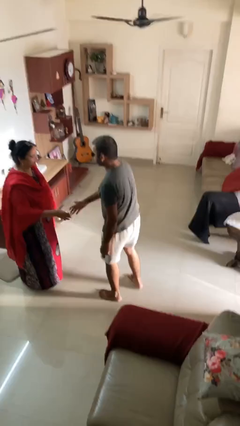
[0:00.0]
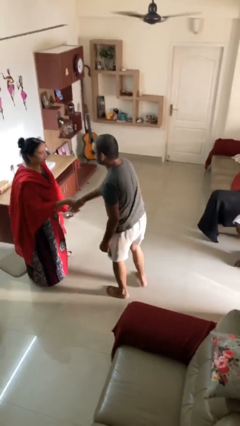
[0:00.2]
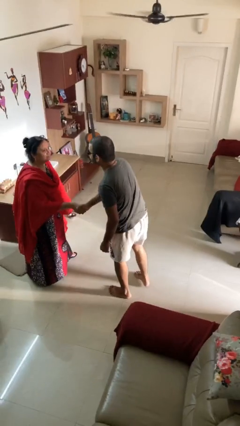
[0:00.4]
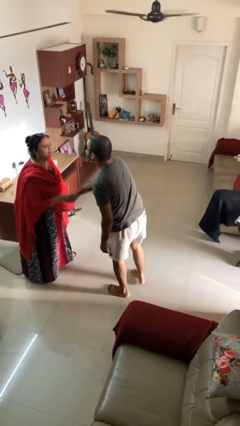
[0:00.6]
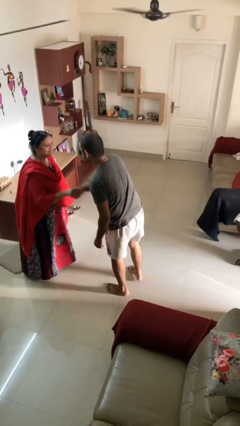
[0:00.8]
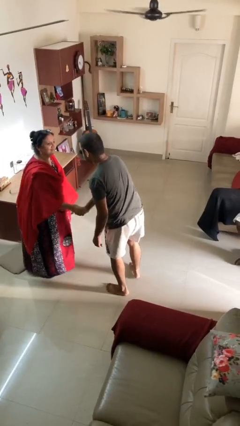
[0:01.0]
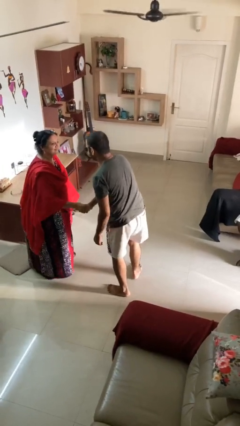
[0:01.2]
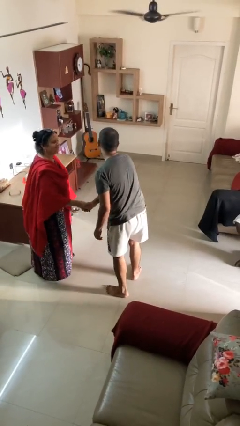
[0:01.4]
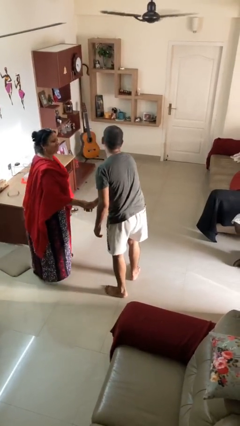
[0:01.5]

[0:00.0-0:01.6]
person shakes hand

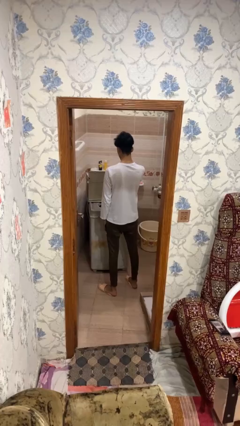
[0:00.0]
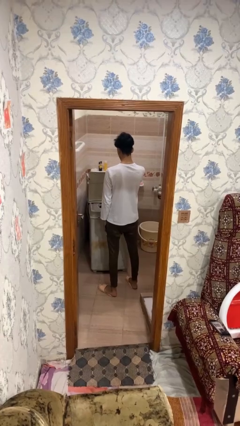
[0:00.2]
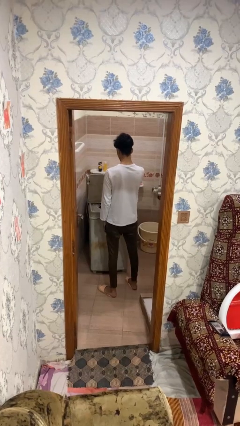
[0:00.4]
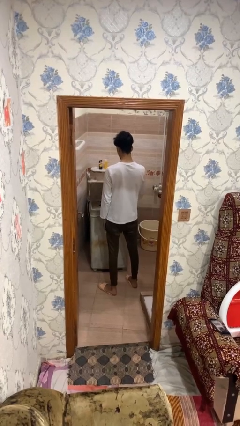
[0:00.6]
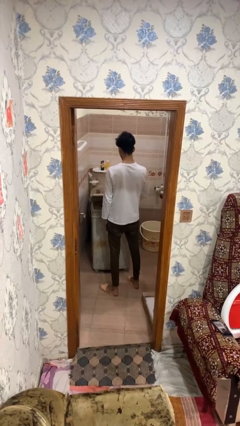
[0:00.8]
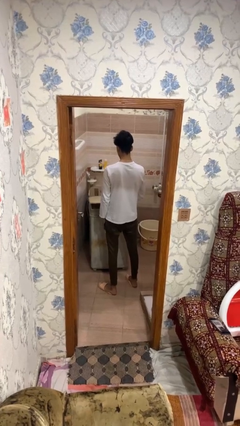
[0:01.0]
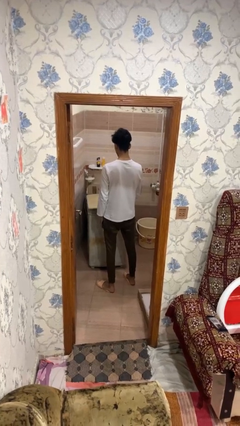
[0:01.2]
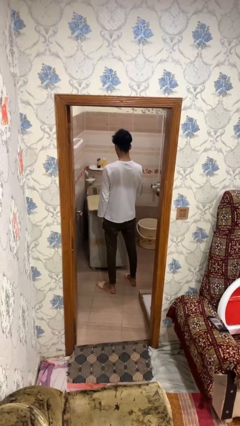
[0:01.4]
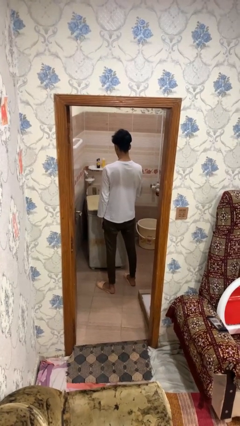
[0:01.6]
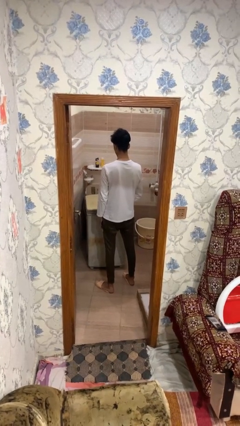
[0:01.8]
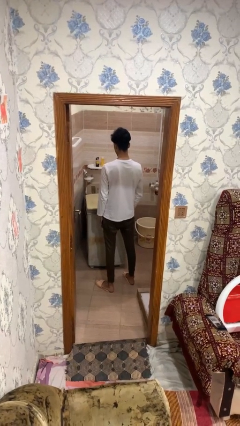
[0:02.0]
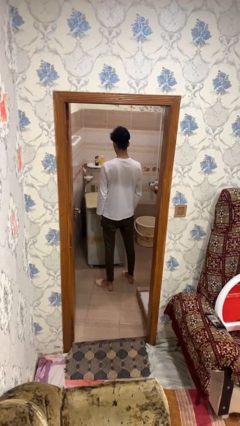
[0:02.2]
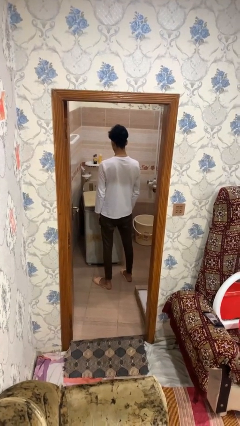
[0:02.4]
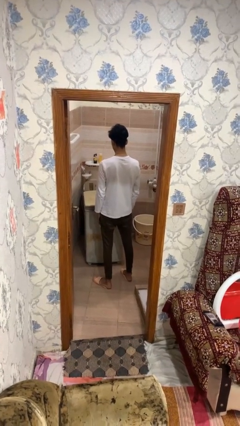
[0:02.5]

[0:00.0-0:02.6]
person closes clothes washer

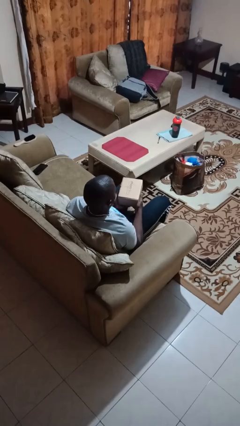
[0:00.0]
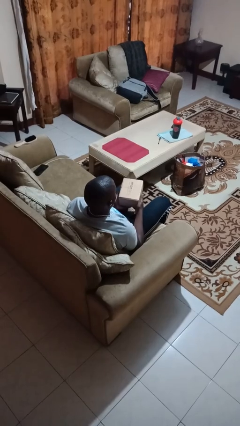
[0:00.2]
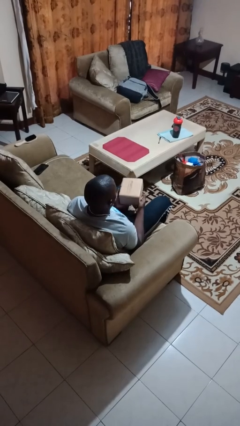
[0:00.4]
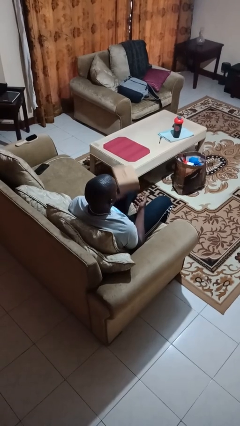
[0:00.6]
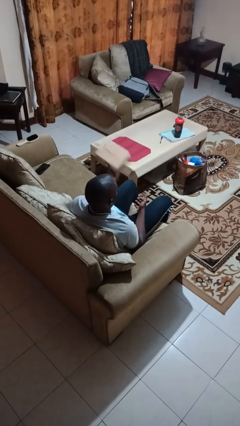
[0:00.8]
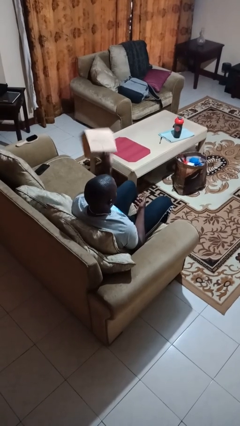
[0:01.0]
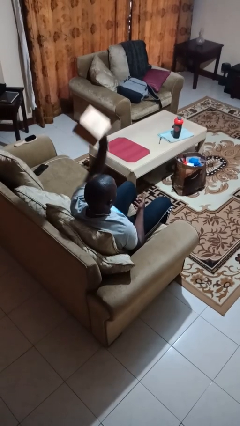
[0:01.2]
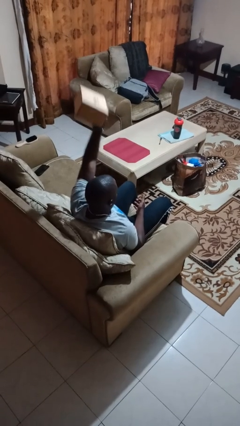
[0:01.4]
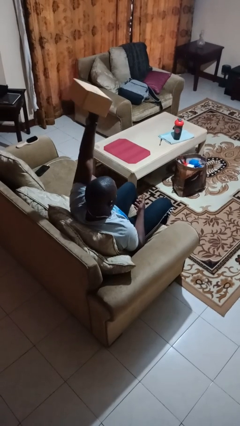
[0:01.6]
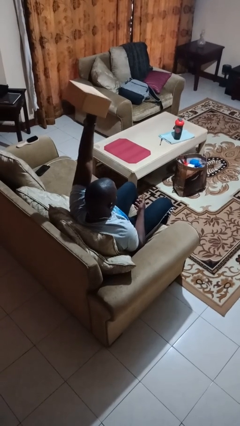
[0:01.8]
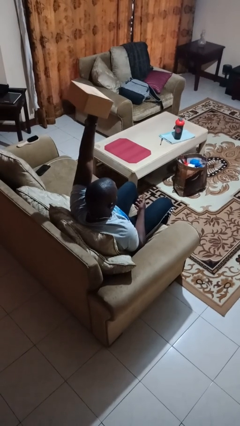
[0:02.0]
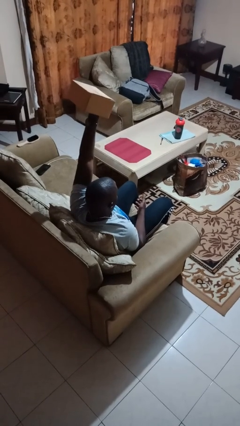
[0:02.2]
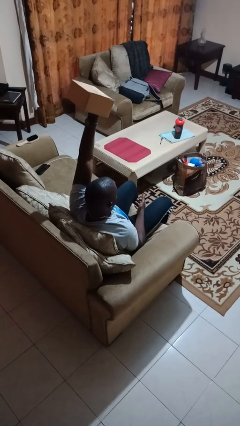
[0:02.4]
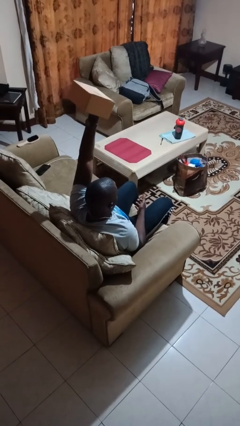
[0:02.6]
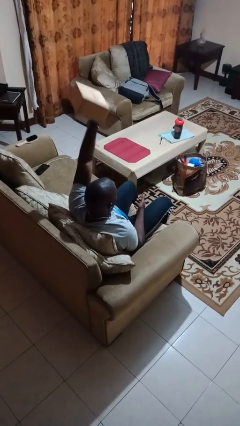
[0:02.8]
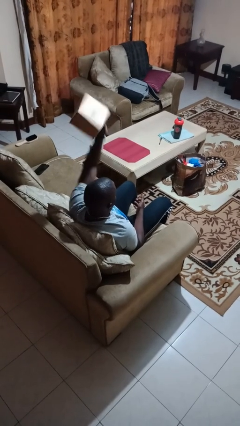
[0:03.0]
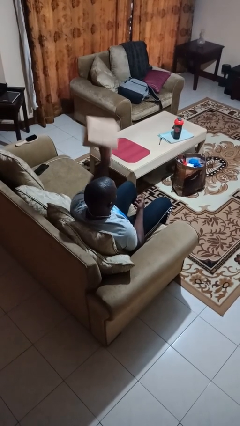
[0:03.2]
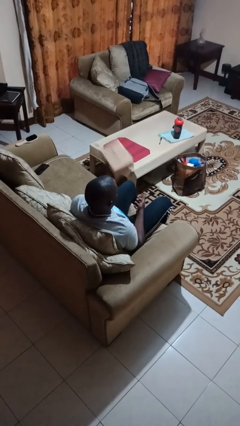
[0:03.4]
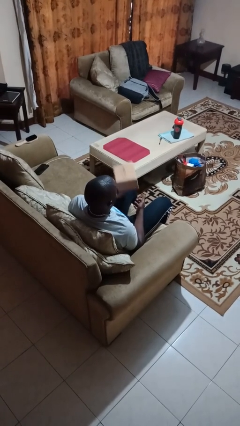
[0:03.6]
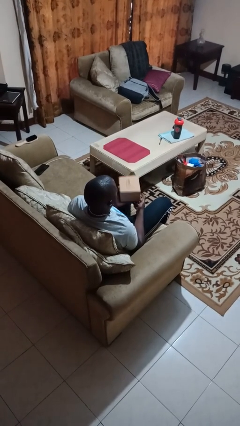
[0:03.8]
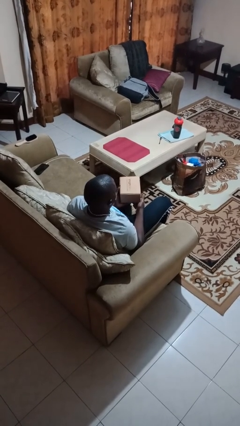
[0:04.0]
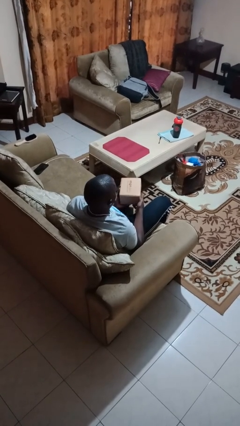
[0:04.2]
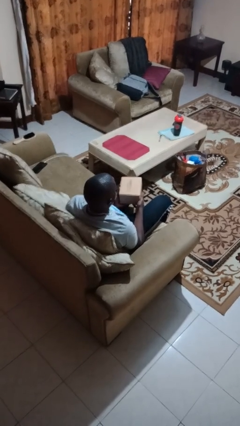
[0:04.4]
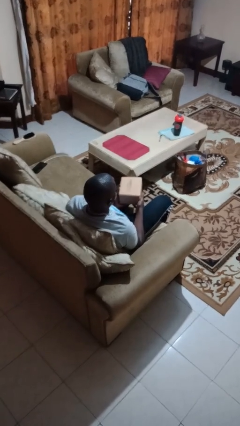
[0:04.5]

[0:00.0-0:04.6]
person holds object above head

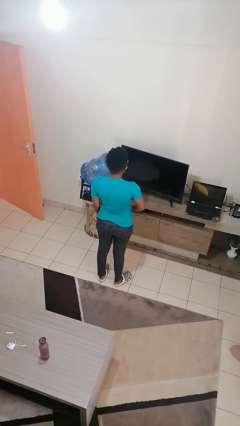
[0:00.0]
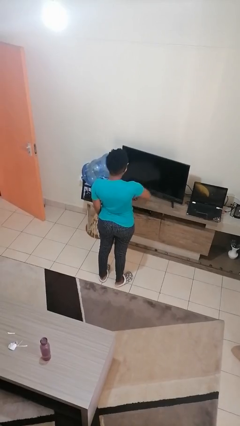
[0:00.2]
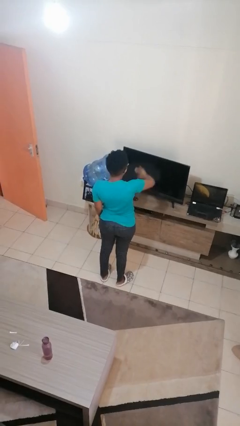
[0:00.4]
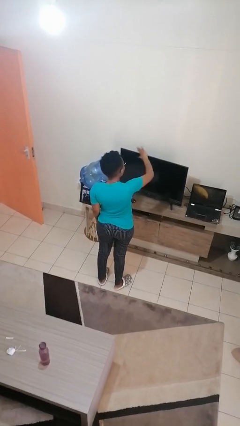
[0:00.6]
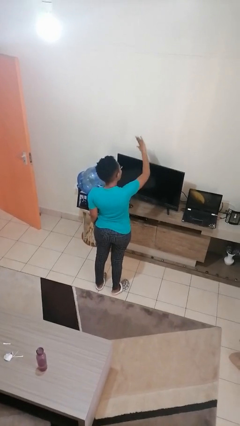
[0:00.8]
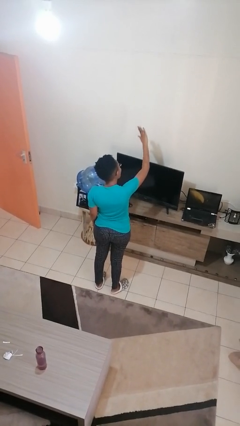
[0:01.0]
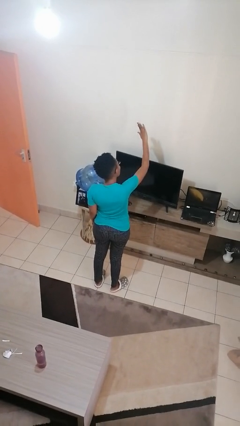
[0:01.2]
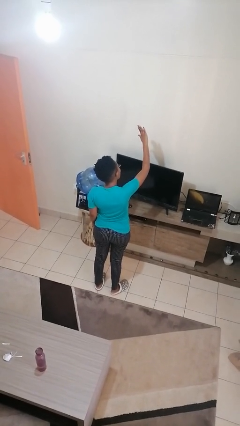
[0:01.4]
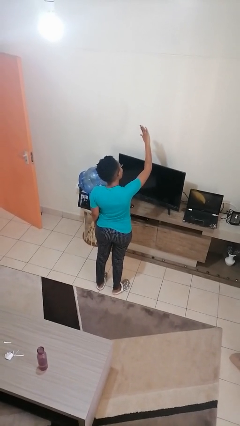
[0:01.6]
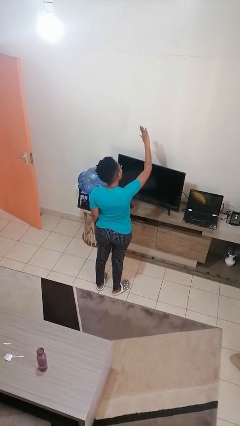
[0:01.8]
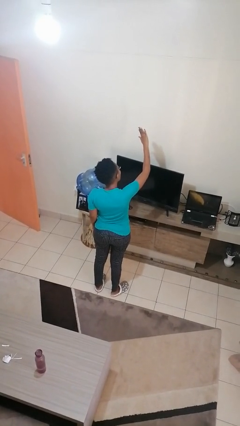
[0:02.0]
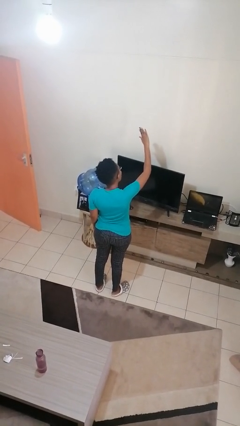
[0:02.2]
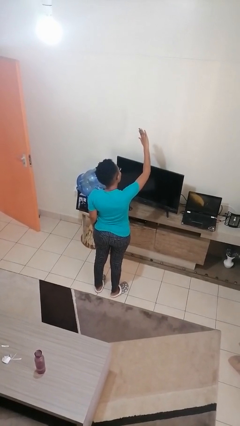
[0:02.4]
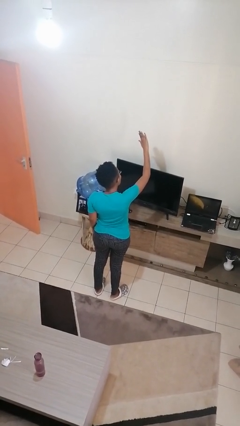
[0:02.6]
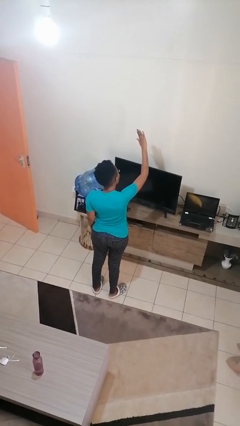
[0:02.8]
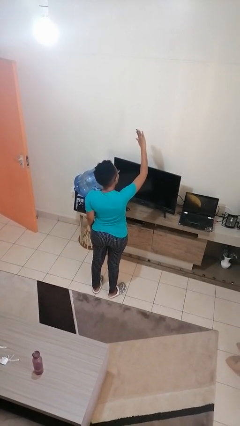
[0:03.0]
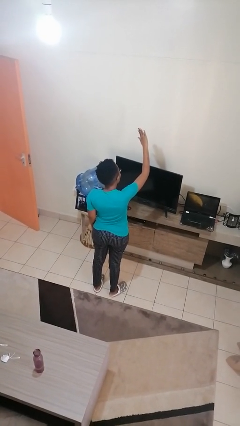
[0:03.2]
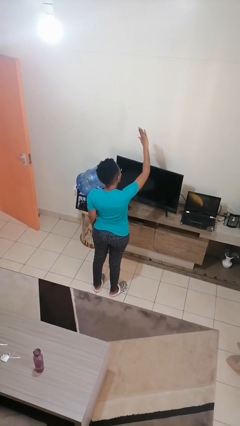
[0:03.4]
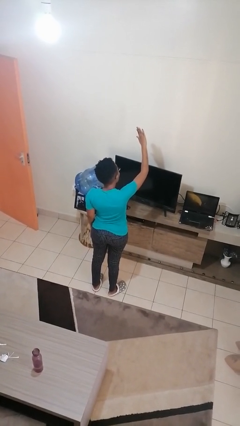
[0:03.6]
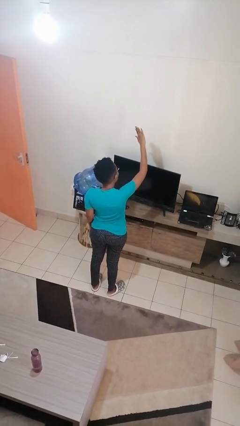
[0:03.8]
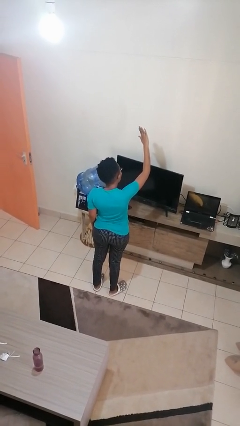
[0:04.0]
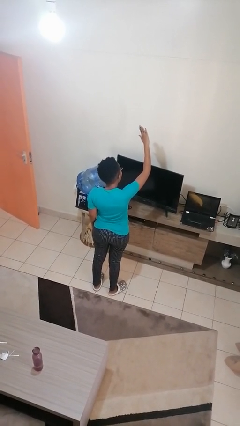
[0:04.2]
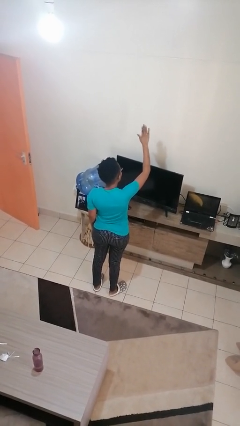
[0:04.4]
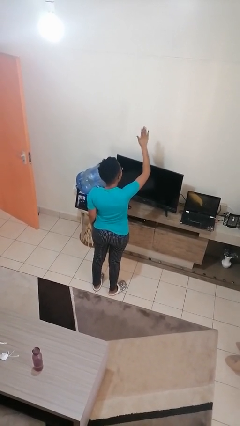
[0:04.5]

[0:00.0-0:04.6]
person gestures swipe up

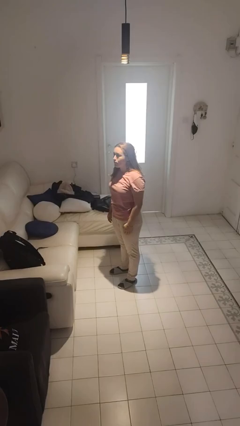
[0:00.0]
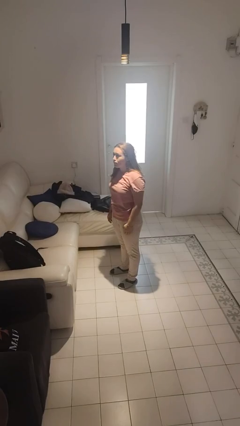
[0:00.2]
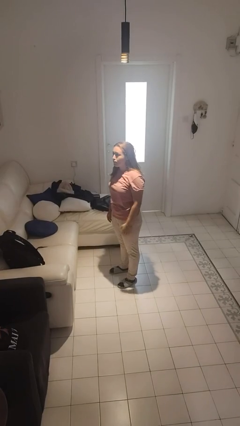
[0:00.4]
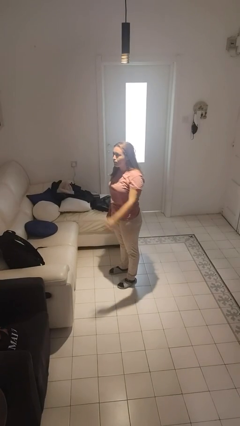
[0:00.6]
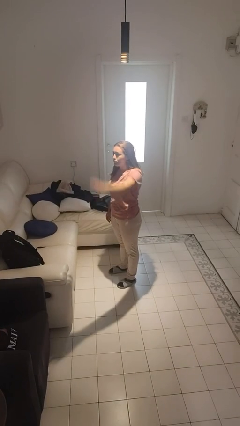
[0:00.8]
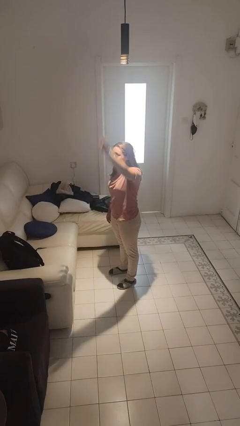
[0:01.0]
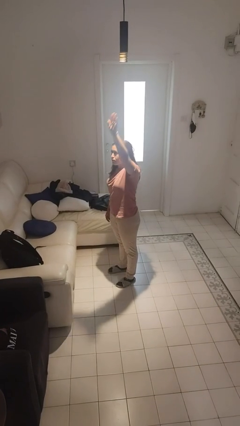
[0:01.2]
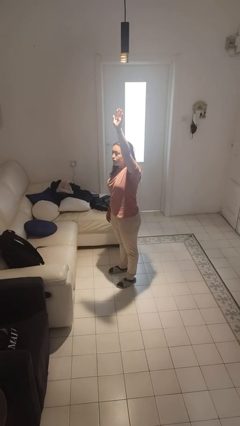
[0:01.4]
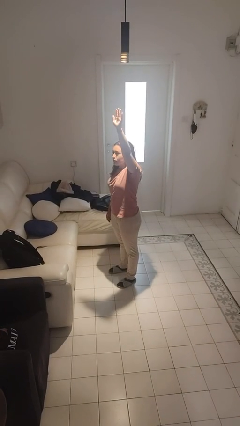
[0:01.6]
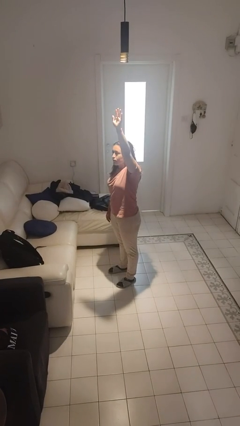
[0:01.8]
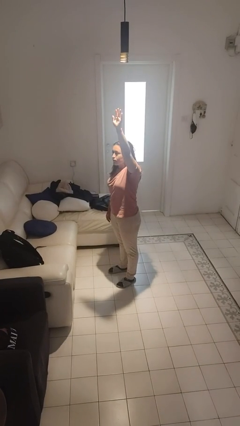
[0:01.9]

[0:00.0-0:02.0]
person gestures raise hand

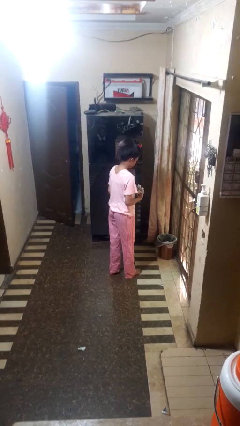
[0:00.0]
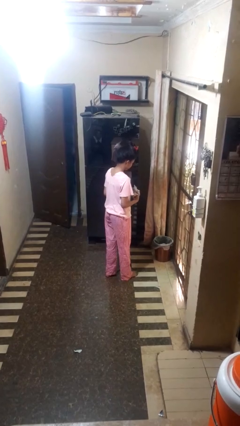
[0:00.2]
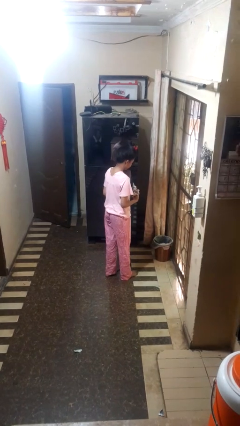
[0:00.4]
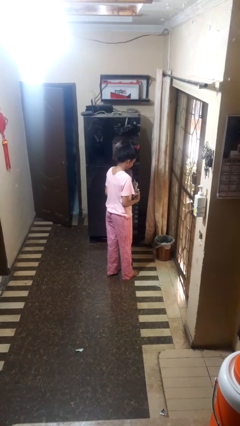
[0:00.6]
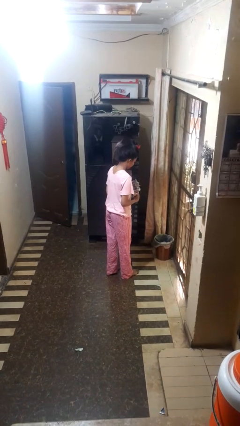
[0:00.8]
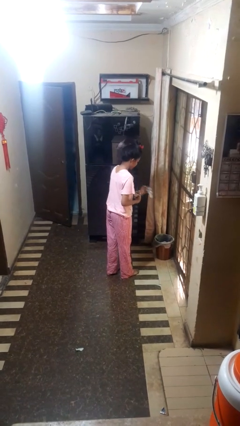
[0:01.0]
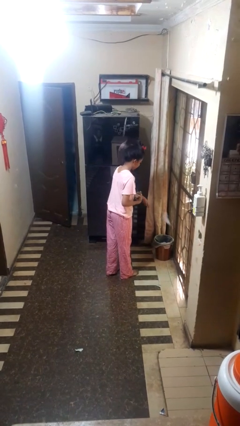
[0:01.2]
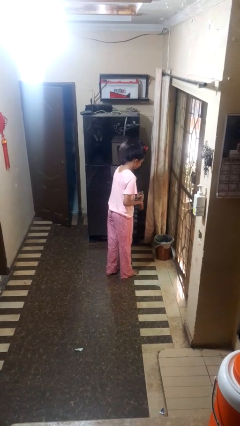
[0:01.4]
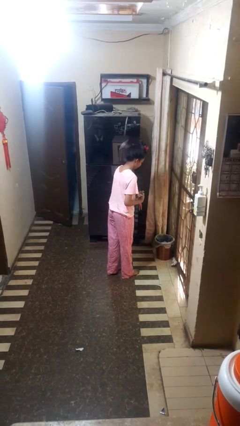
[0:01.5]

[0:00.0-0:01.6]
person discards trash

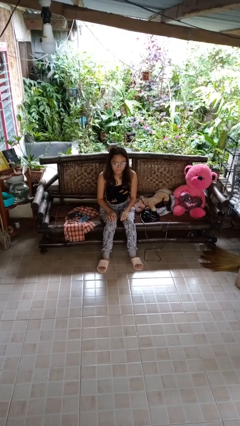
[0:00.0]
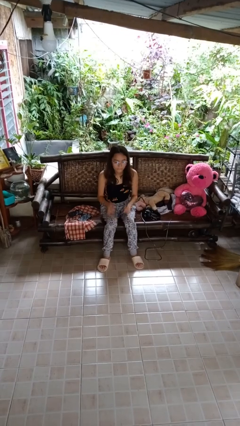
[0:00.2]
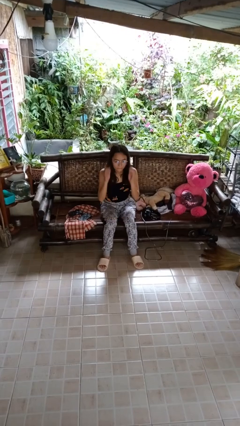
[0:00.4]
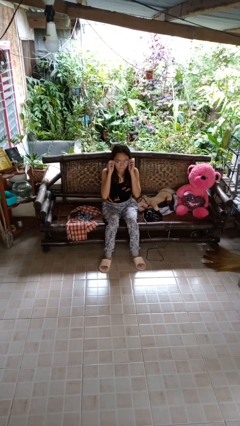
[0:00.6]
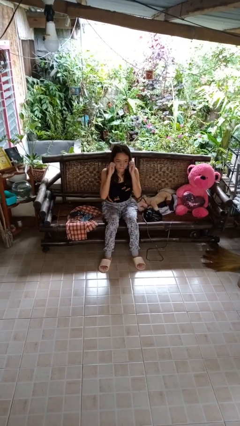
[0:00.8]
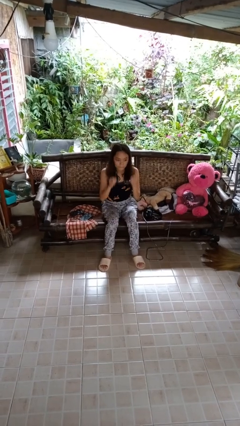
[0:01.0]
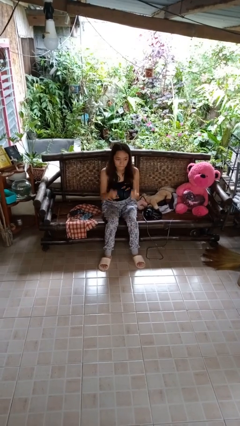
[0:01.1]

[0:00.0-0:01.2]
person takes off glasses
